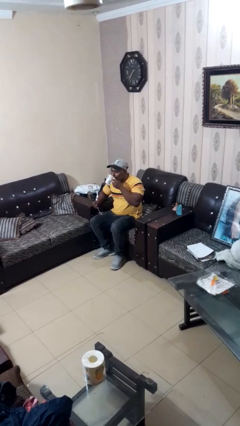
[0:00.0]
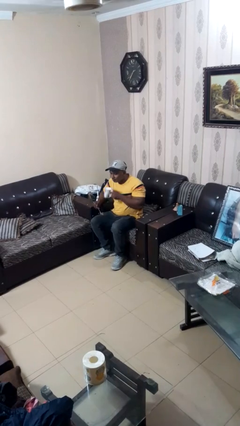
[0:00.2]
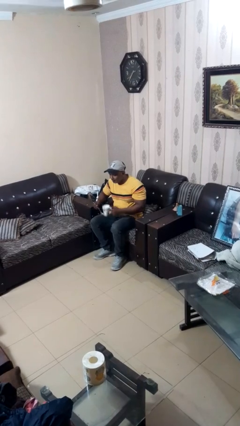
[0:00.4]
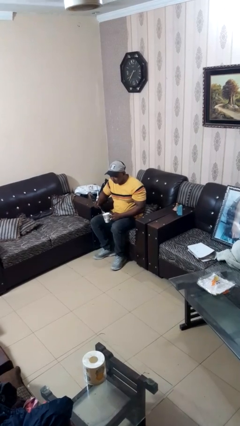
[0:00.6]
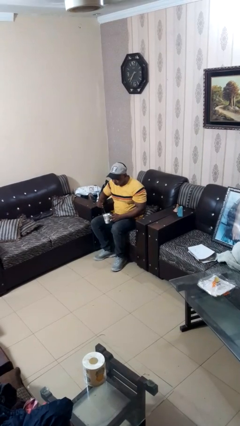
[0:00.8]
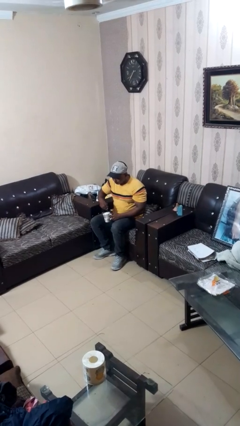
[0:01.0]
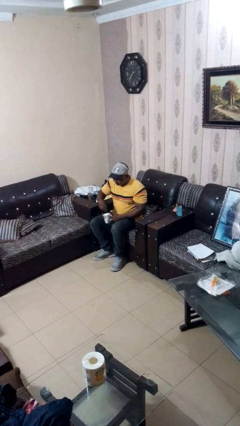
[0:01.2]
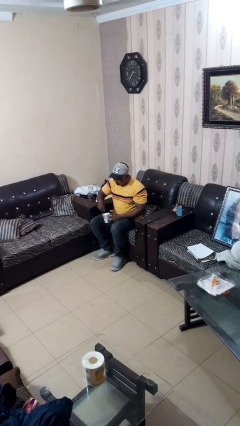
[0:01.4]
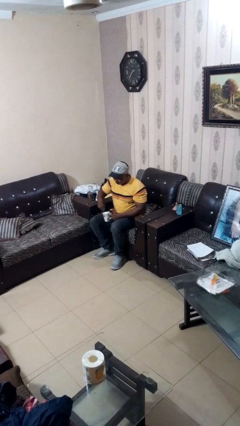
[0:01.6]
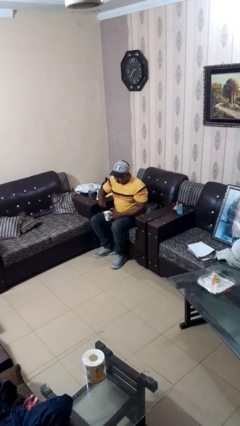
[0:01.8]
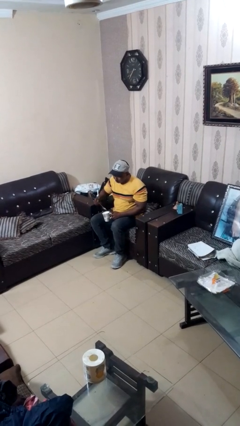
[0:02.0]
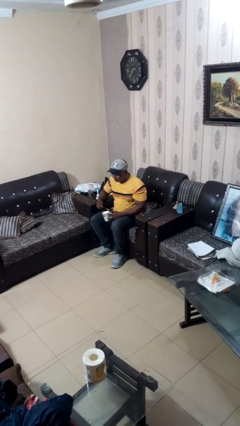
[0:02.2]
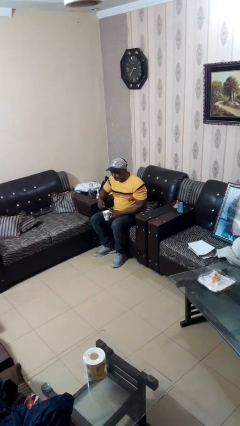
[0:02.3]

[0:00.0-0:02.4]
person stirs mug

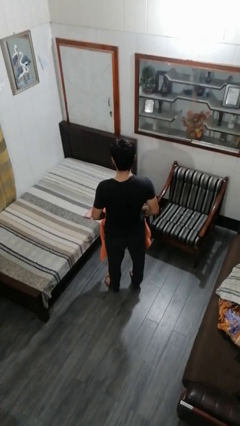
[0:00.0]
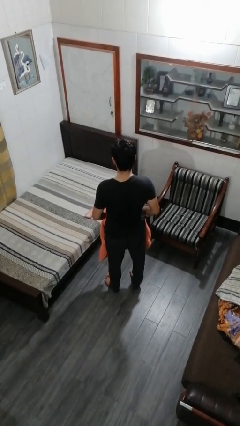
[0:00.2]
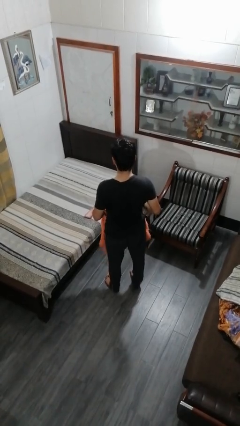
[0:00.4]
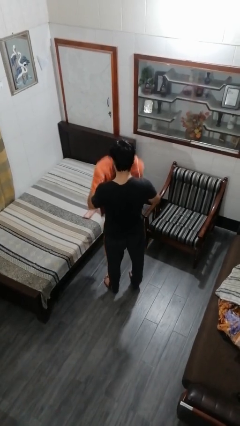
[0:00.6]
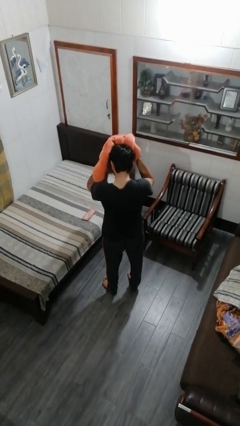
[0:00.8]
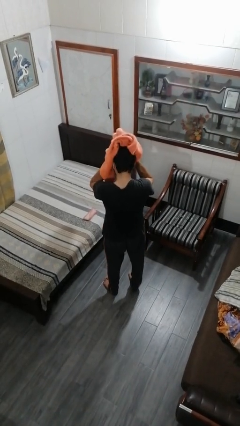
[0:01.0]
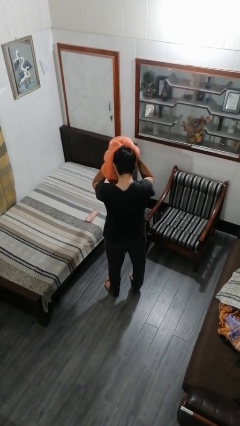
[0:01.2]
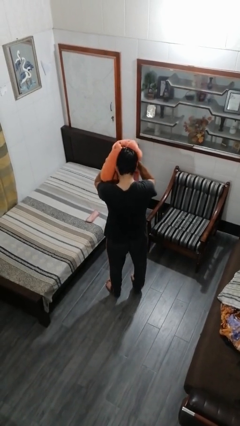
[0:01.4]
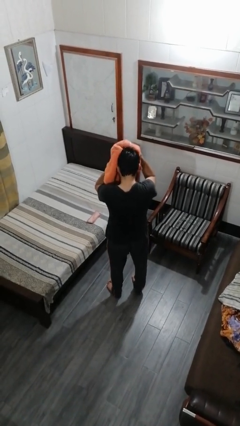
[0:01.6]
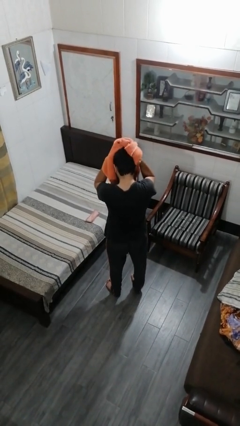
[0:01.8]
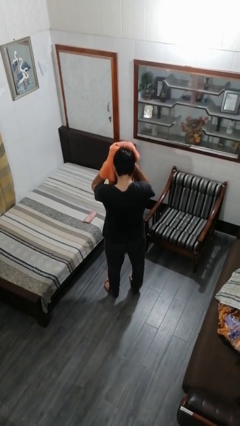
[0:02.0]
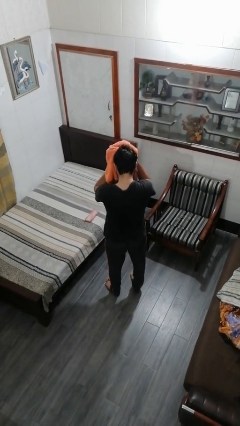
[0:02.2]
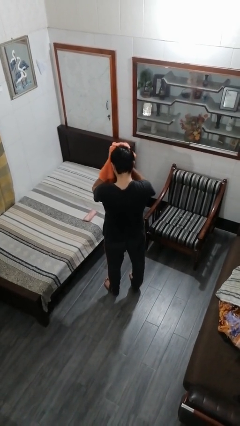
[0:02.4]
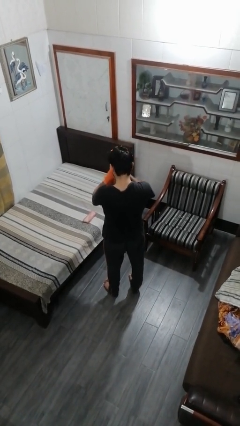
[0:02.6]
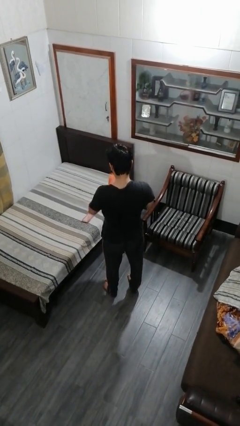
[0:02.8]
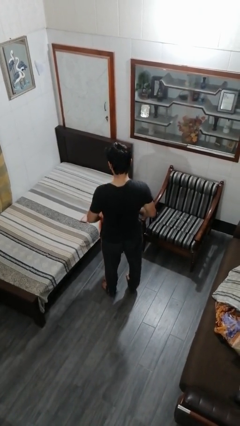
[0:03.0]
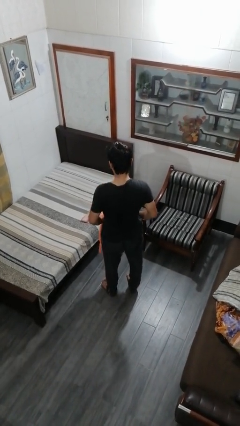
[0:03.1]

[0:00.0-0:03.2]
person dries hair with towel

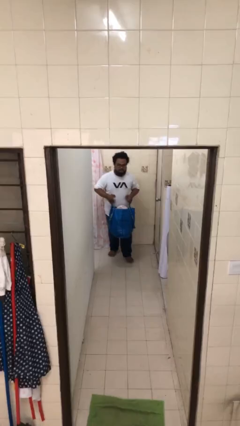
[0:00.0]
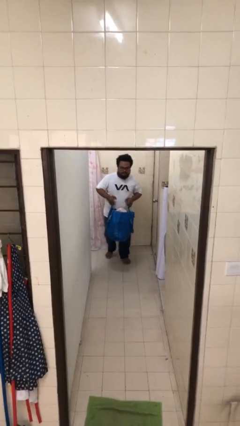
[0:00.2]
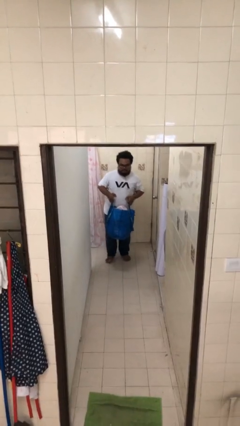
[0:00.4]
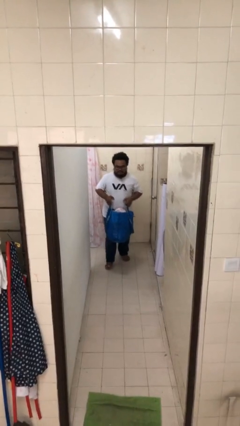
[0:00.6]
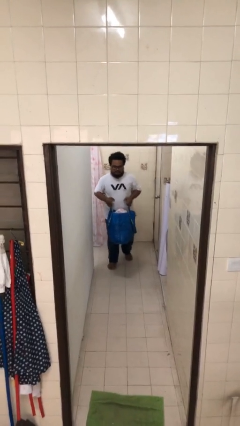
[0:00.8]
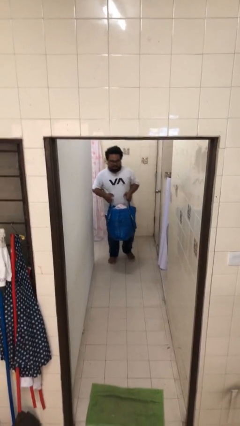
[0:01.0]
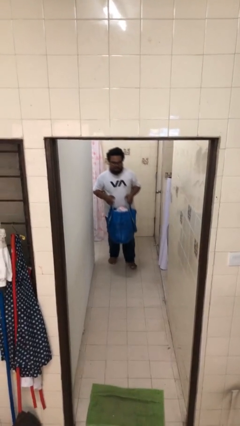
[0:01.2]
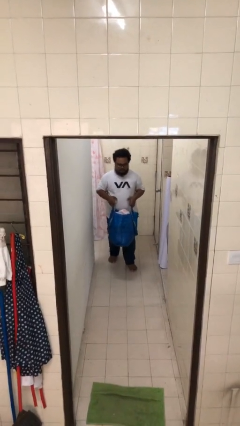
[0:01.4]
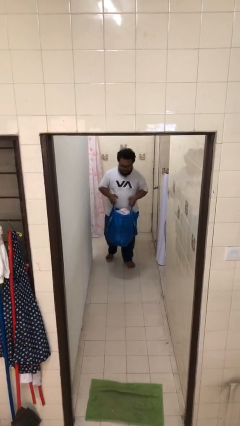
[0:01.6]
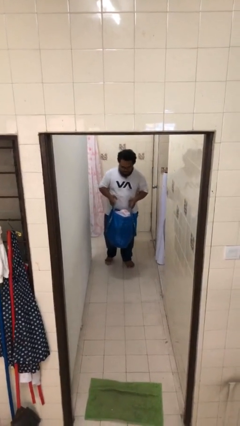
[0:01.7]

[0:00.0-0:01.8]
person carries heavy object

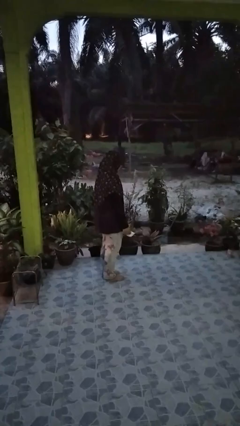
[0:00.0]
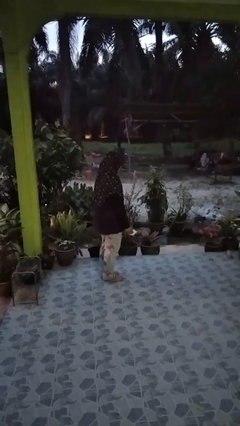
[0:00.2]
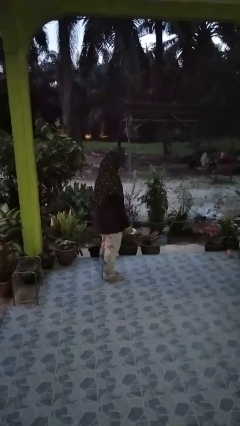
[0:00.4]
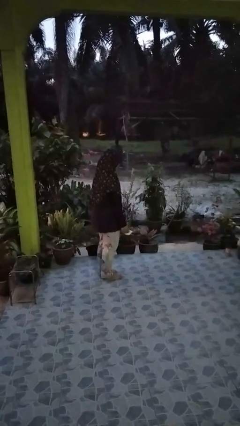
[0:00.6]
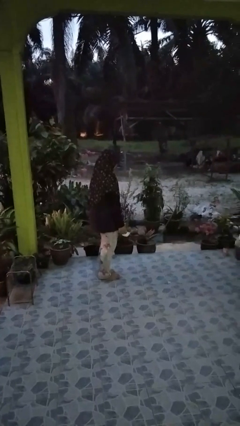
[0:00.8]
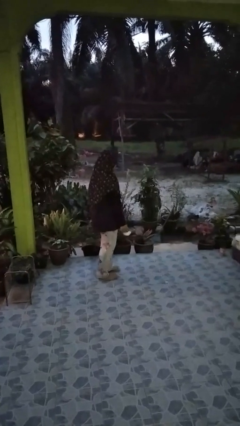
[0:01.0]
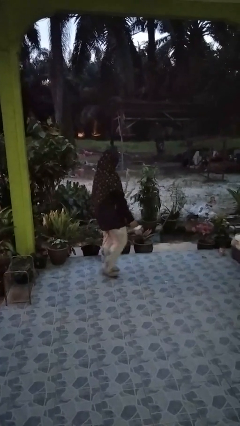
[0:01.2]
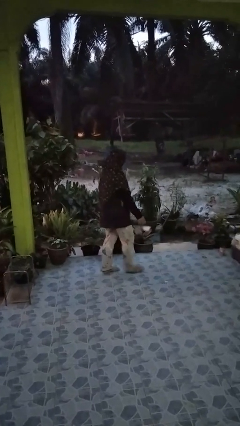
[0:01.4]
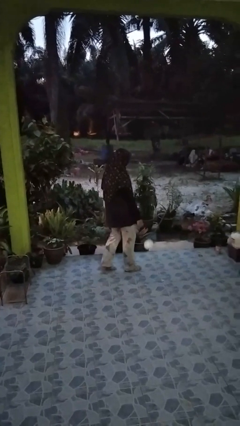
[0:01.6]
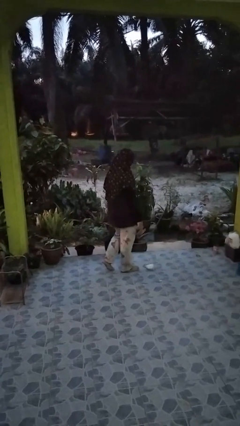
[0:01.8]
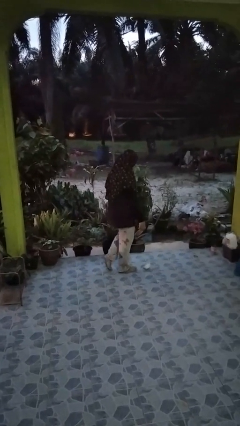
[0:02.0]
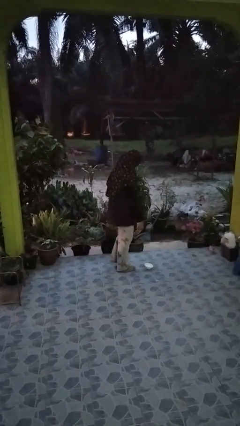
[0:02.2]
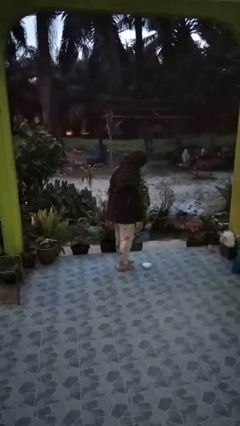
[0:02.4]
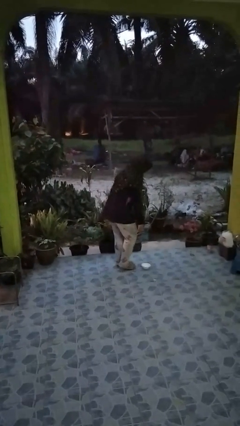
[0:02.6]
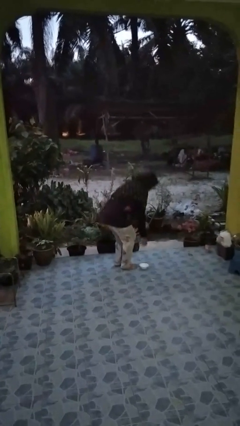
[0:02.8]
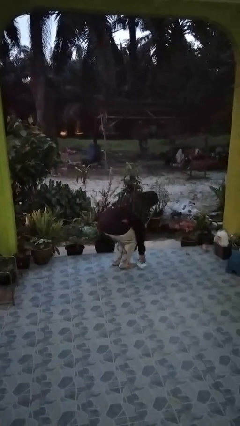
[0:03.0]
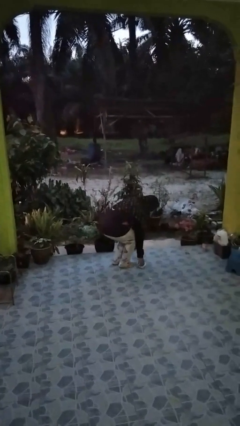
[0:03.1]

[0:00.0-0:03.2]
person drops object

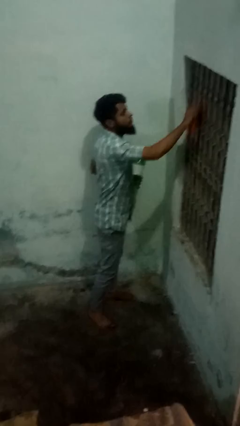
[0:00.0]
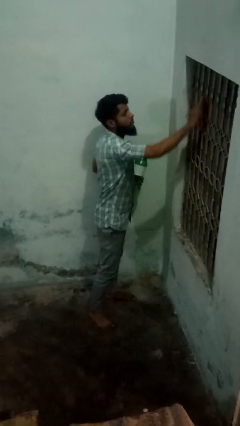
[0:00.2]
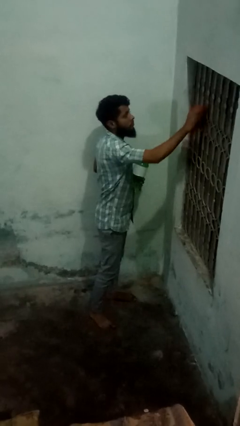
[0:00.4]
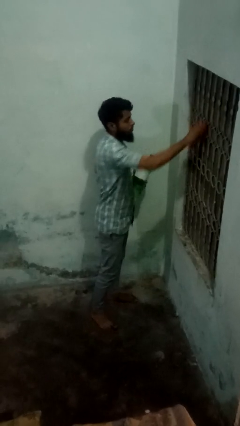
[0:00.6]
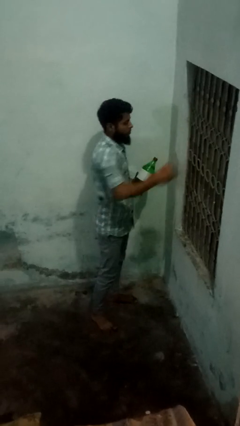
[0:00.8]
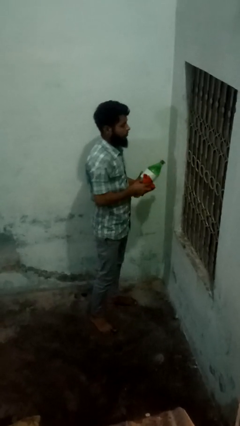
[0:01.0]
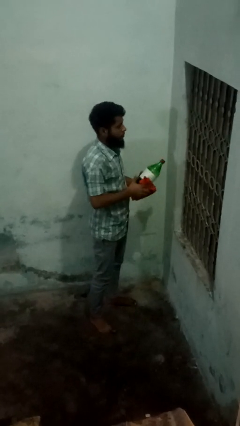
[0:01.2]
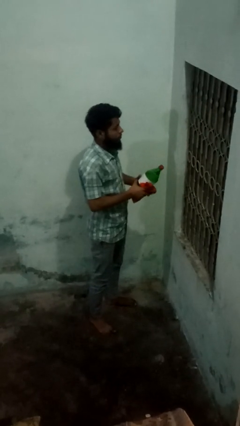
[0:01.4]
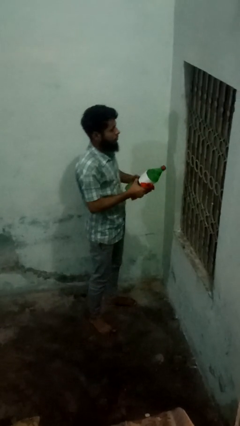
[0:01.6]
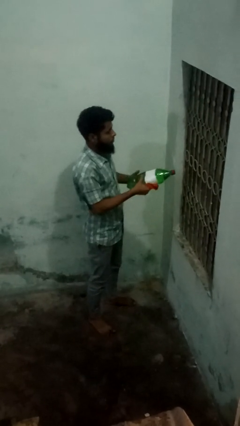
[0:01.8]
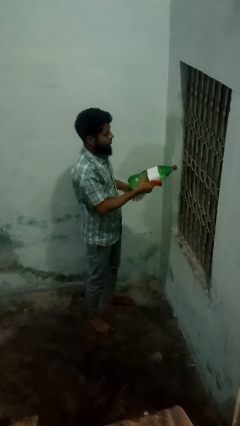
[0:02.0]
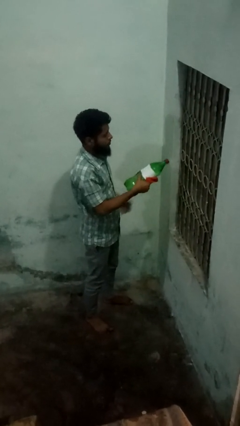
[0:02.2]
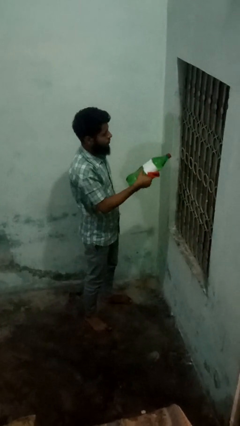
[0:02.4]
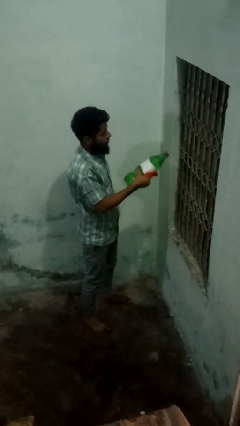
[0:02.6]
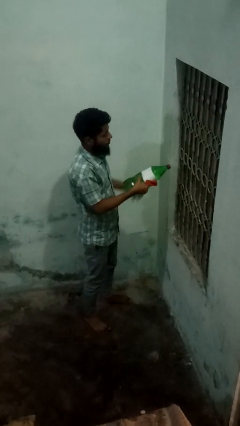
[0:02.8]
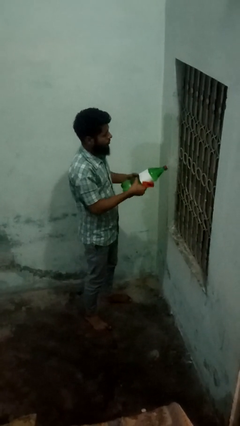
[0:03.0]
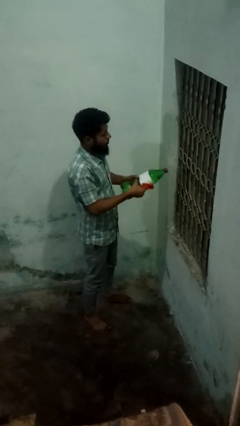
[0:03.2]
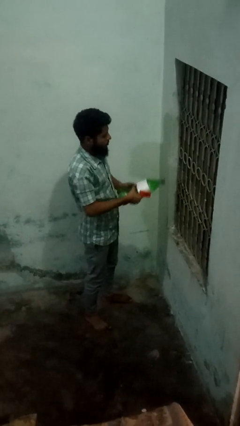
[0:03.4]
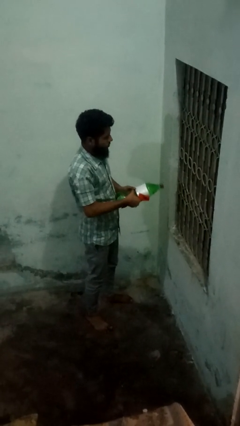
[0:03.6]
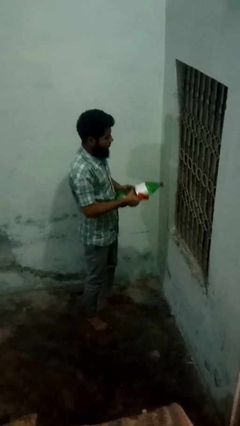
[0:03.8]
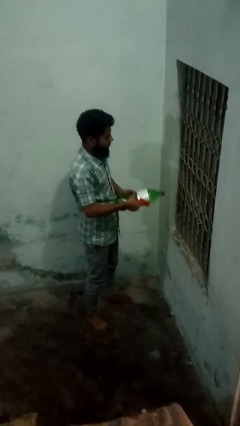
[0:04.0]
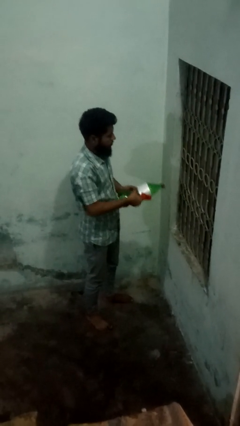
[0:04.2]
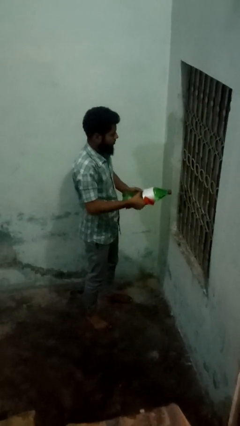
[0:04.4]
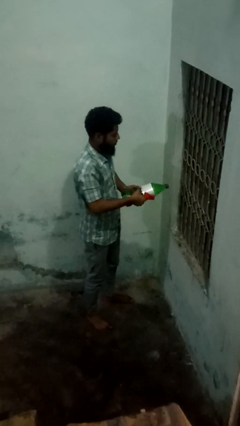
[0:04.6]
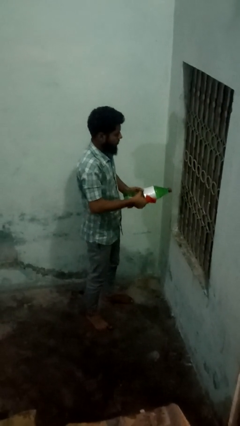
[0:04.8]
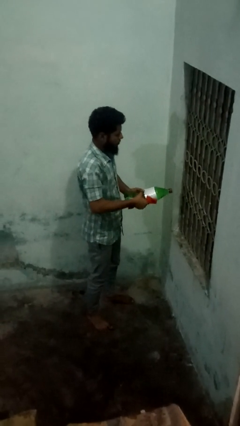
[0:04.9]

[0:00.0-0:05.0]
person sprays from bottle

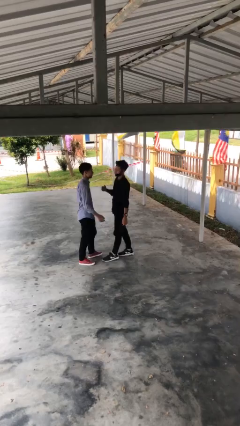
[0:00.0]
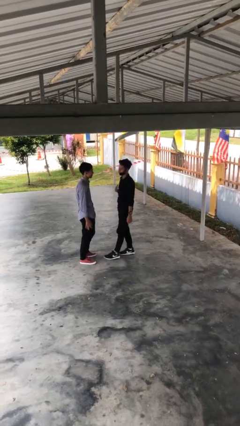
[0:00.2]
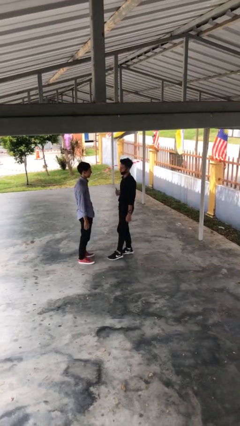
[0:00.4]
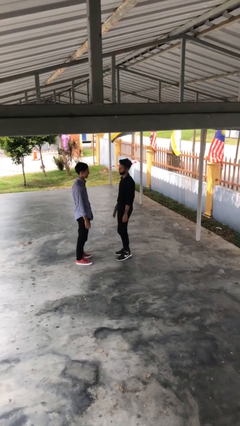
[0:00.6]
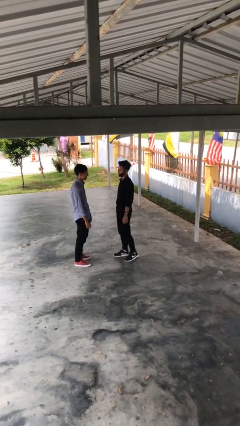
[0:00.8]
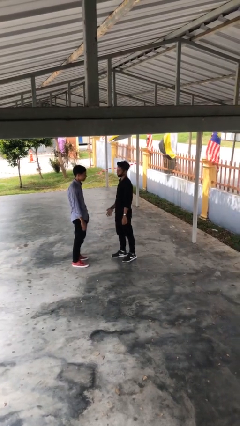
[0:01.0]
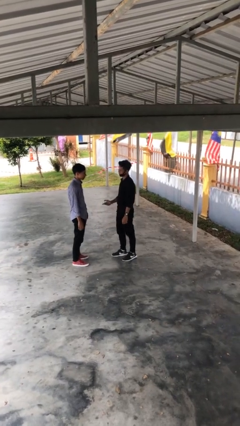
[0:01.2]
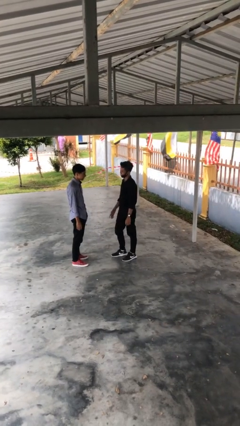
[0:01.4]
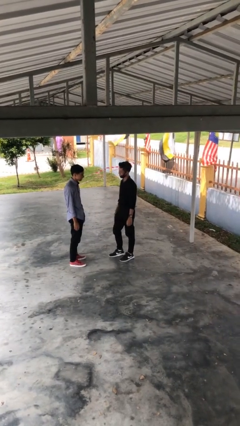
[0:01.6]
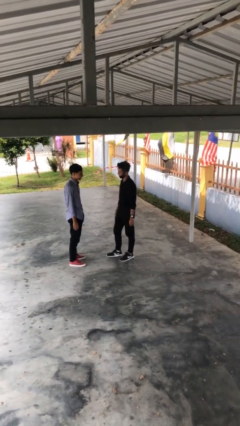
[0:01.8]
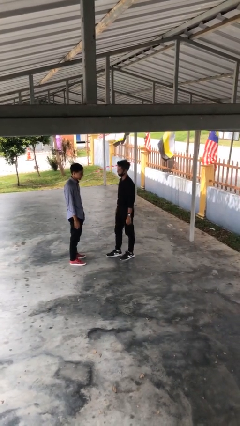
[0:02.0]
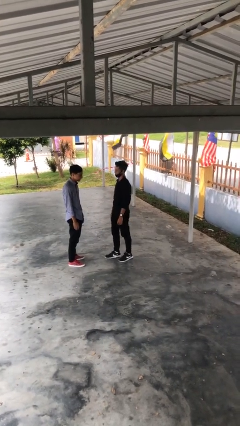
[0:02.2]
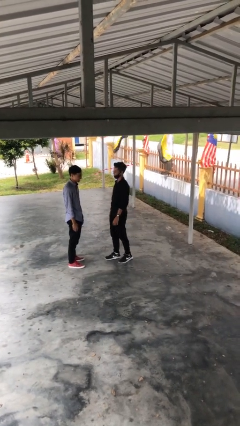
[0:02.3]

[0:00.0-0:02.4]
person talks to person
